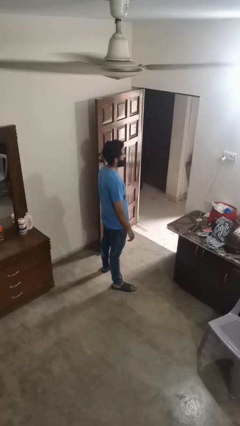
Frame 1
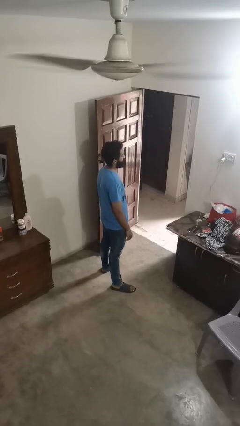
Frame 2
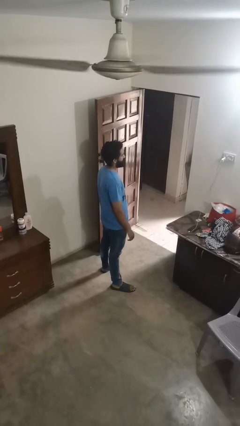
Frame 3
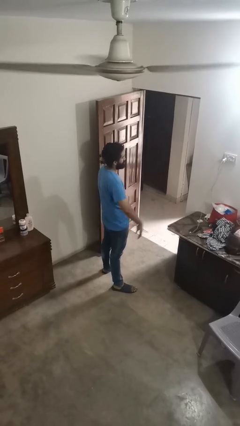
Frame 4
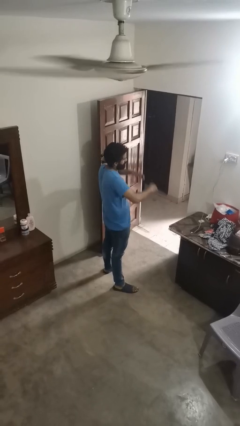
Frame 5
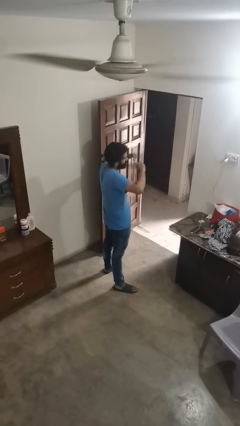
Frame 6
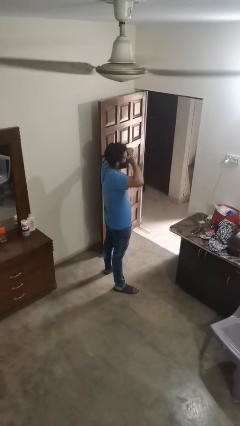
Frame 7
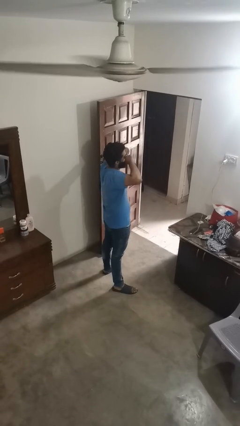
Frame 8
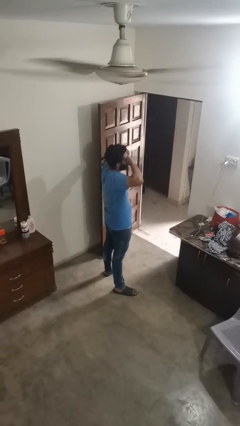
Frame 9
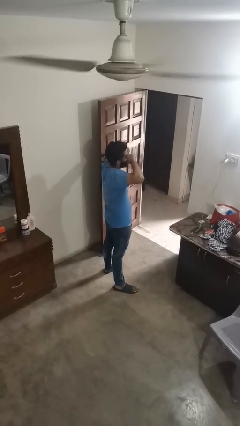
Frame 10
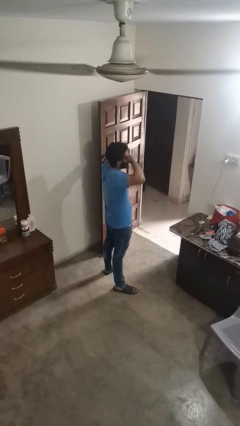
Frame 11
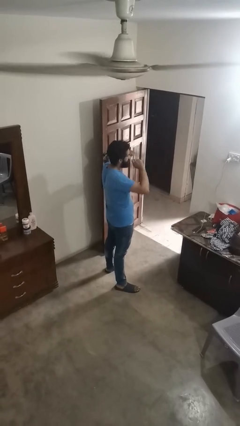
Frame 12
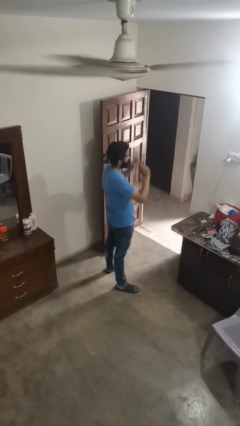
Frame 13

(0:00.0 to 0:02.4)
person rubs eyes

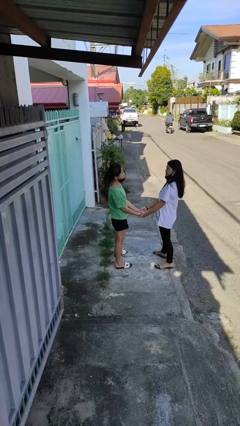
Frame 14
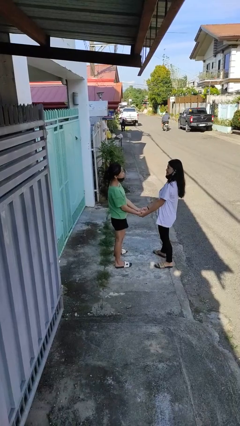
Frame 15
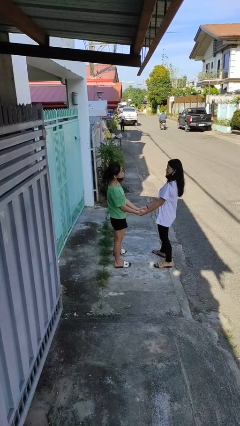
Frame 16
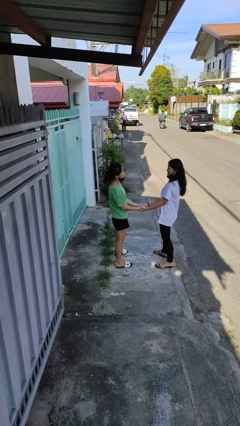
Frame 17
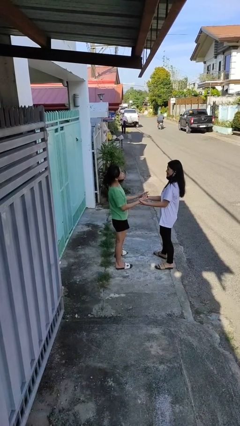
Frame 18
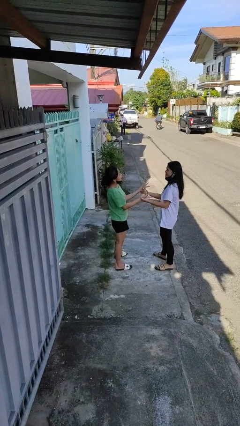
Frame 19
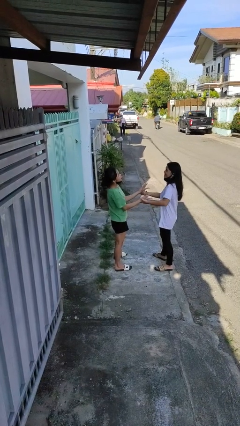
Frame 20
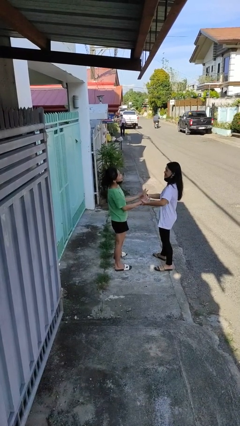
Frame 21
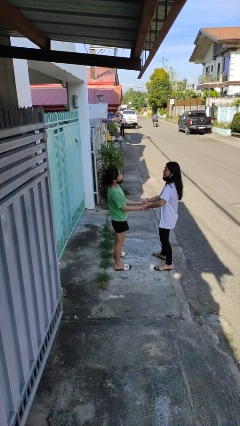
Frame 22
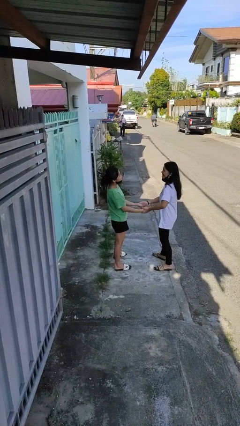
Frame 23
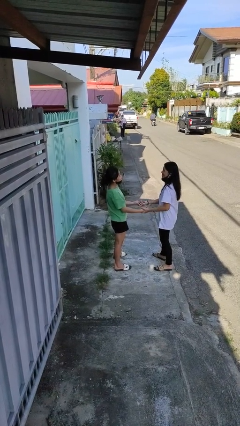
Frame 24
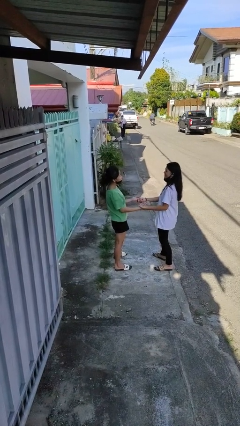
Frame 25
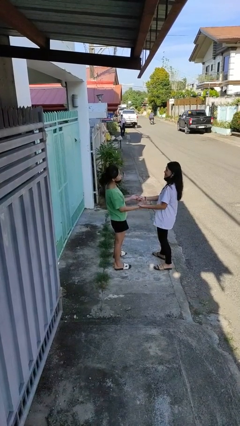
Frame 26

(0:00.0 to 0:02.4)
person talks to person

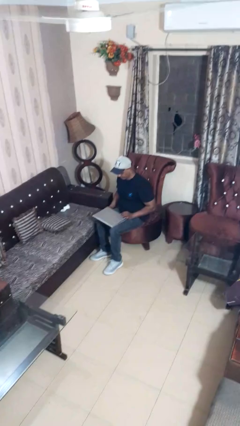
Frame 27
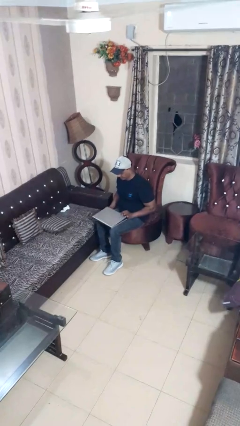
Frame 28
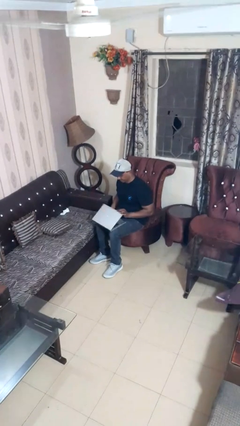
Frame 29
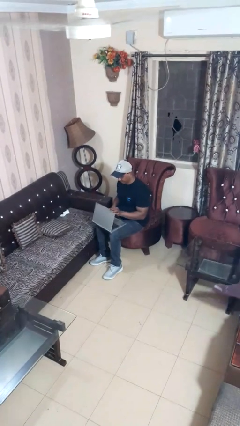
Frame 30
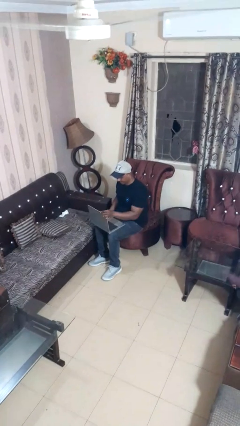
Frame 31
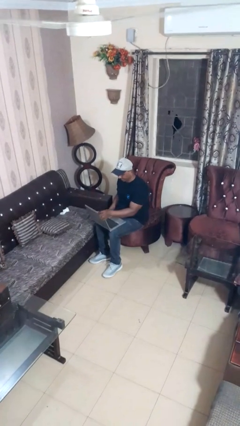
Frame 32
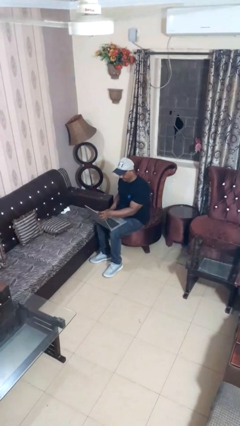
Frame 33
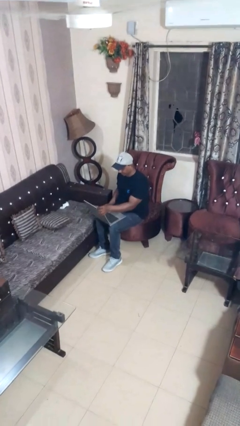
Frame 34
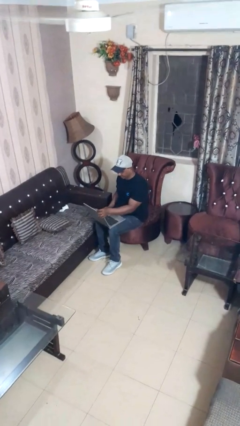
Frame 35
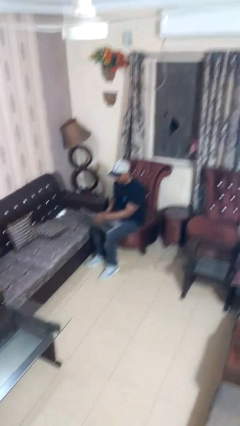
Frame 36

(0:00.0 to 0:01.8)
person opens laptop

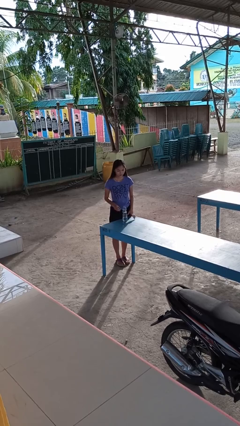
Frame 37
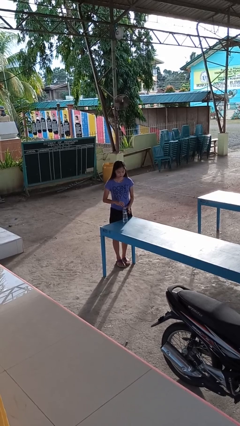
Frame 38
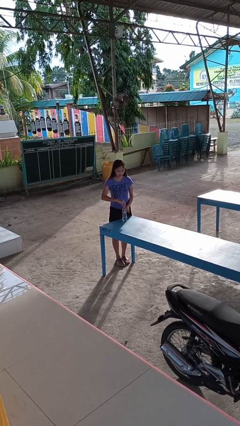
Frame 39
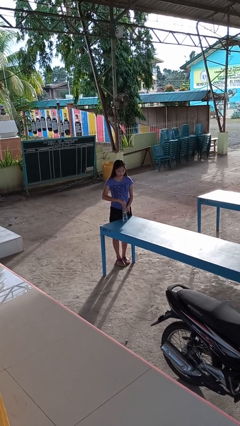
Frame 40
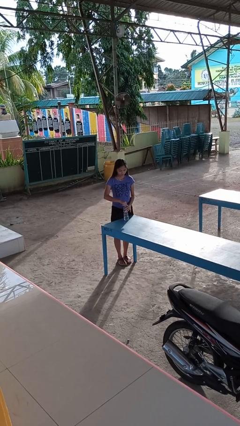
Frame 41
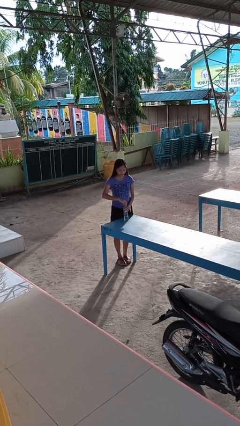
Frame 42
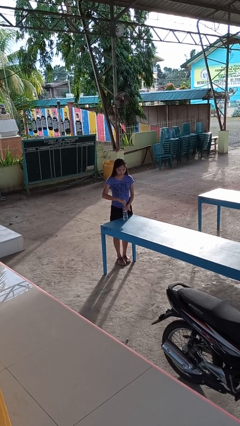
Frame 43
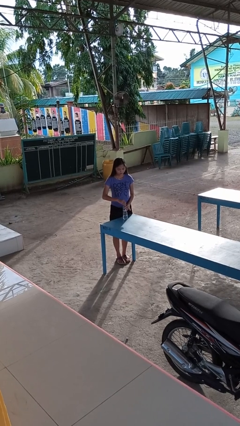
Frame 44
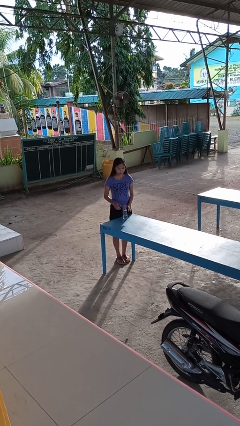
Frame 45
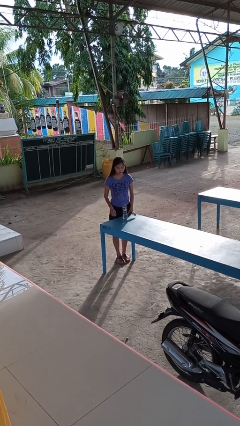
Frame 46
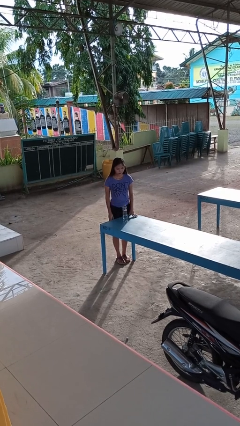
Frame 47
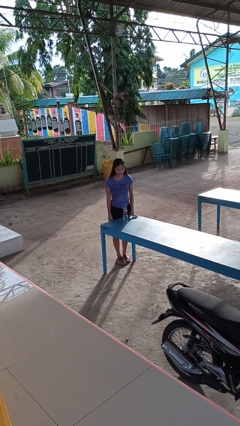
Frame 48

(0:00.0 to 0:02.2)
person screws lid to bottle

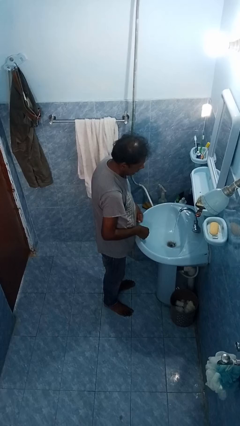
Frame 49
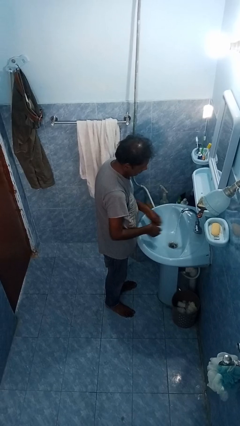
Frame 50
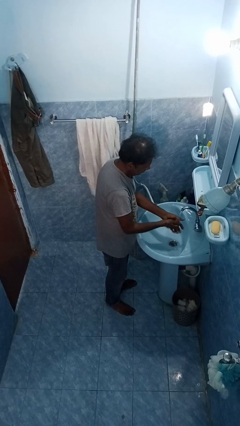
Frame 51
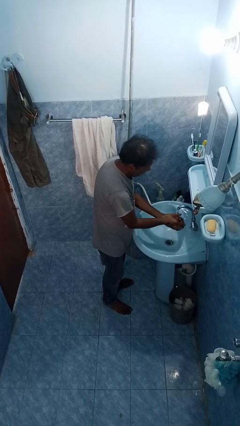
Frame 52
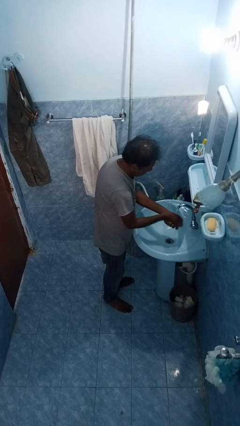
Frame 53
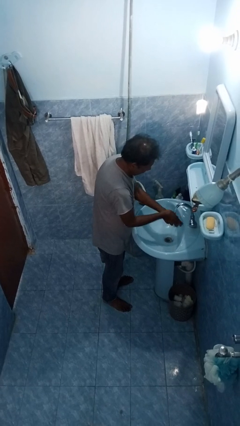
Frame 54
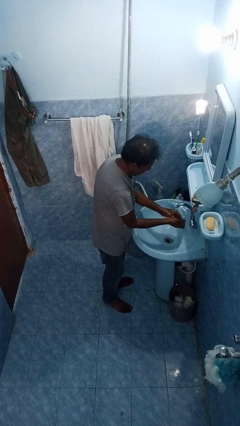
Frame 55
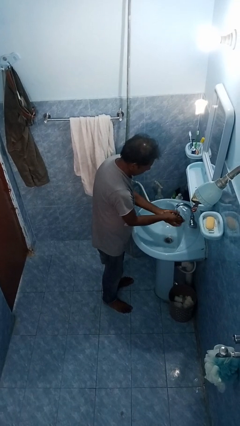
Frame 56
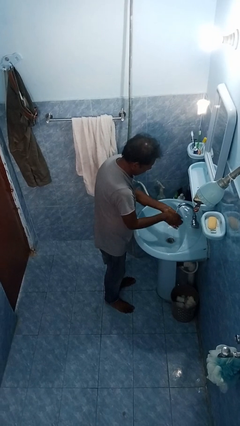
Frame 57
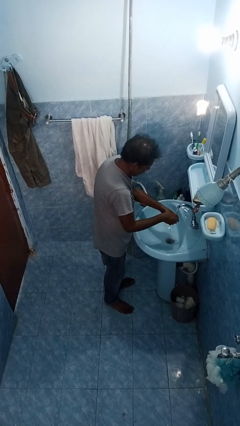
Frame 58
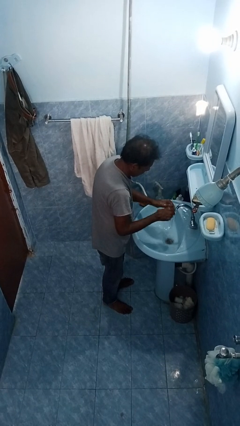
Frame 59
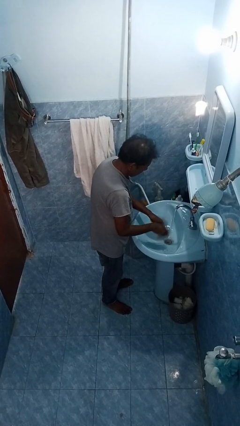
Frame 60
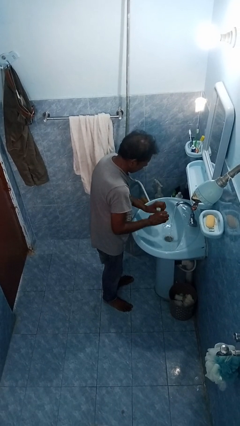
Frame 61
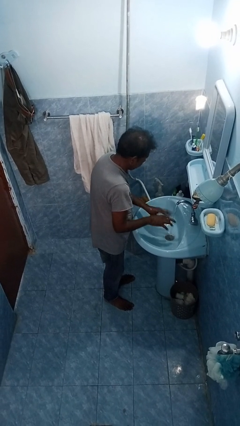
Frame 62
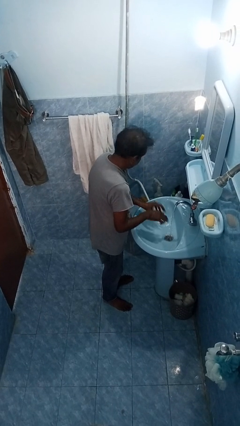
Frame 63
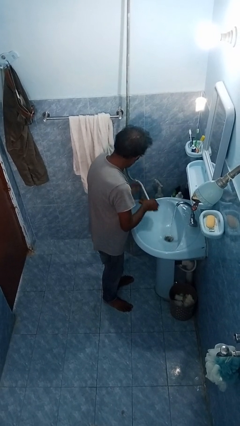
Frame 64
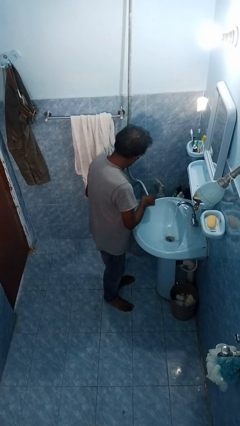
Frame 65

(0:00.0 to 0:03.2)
person washes hands

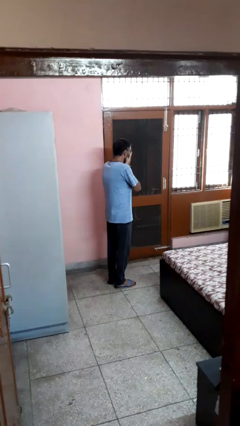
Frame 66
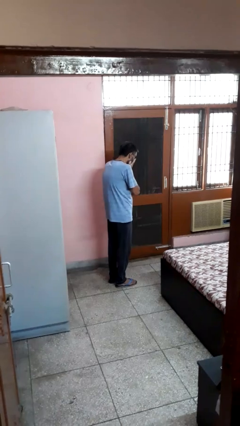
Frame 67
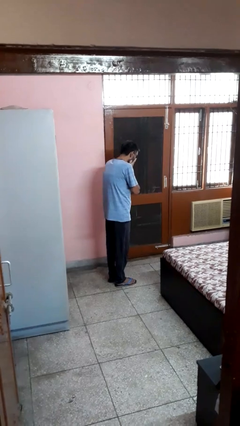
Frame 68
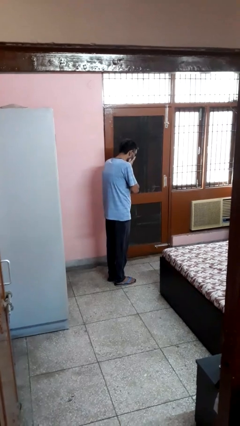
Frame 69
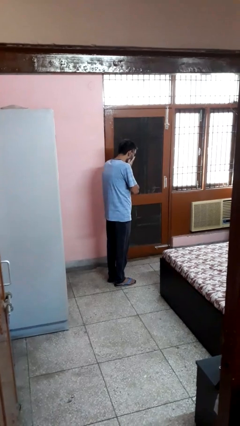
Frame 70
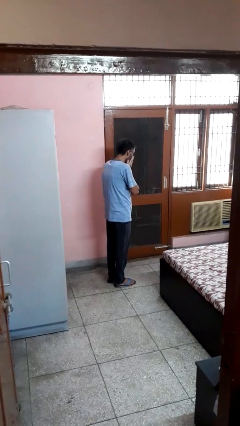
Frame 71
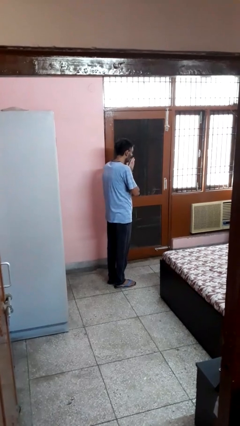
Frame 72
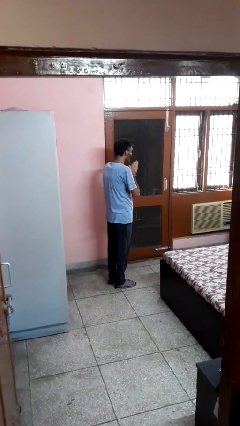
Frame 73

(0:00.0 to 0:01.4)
person sneezes into hand

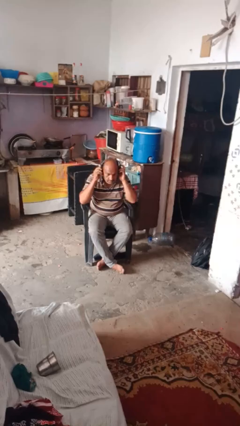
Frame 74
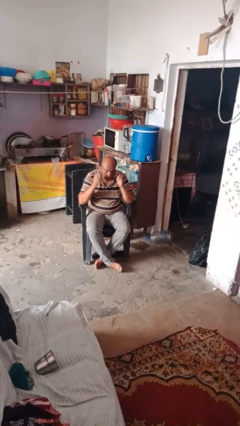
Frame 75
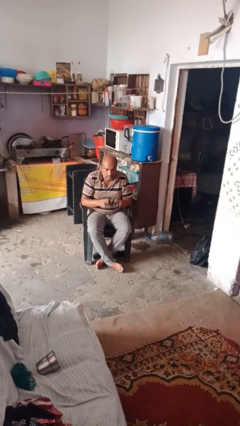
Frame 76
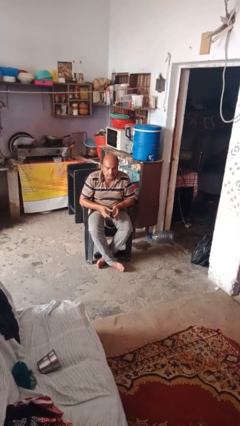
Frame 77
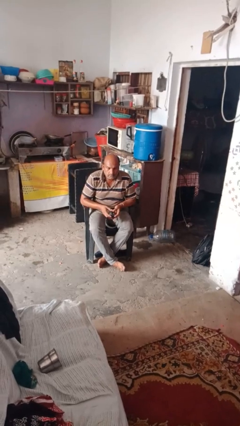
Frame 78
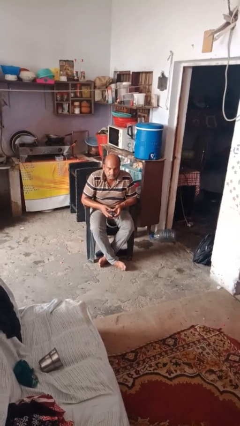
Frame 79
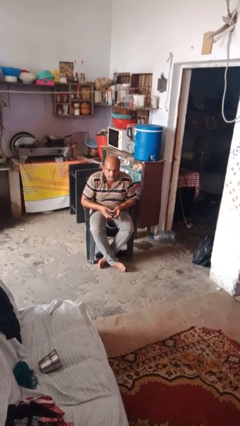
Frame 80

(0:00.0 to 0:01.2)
person takes off headphones

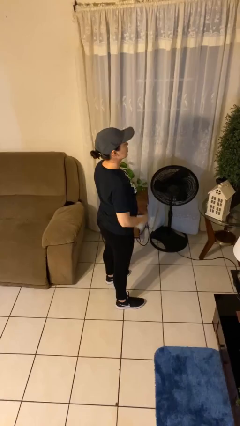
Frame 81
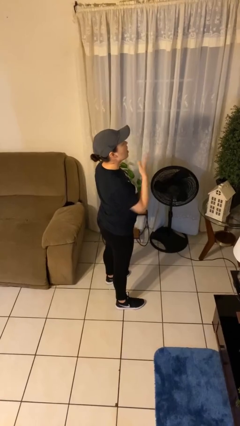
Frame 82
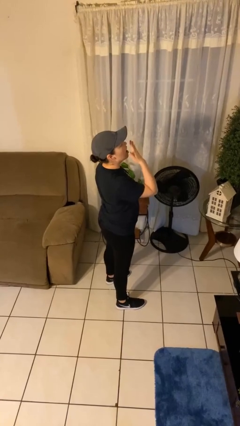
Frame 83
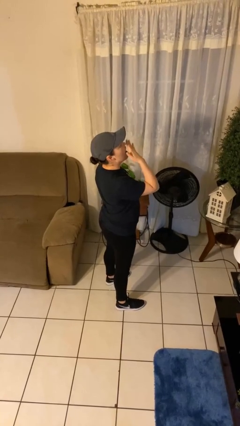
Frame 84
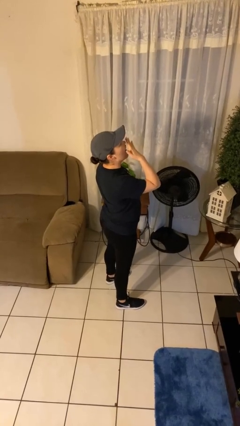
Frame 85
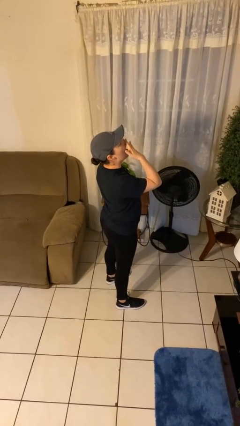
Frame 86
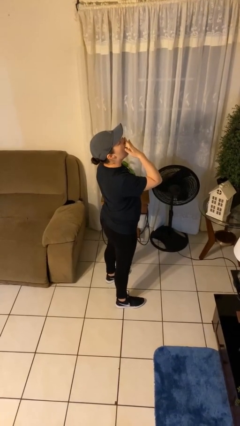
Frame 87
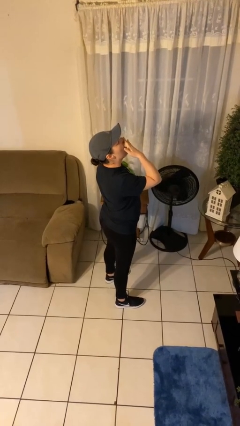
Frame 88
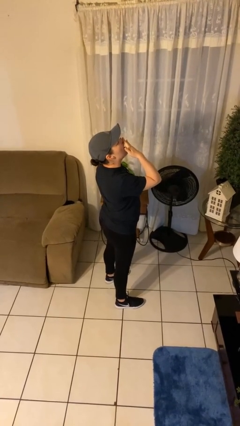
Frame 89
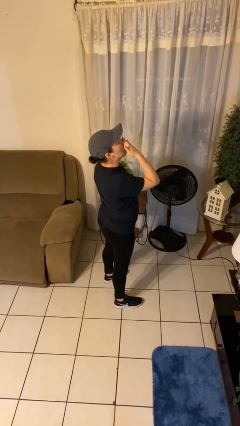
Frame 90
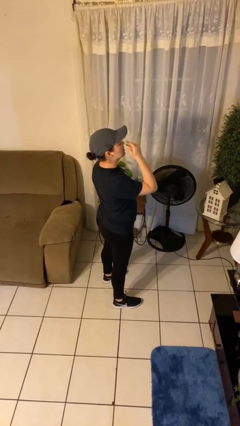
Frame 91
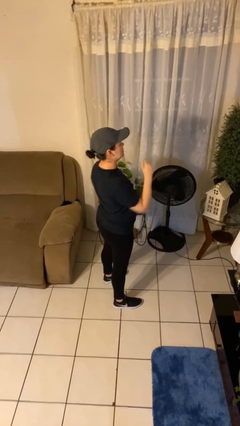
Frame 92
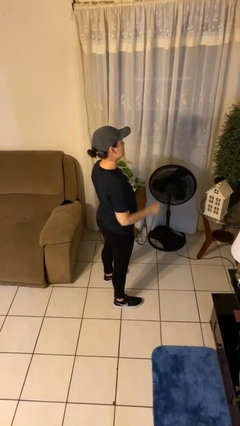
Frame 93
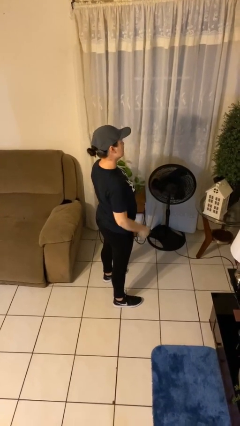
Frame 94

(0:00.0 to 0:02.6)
person yawns
